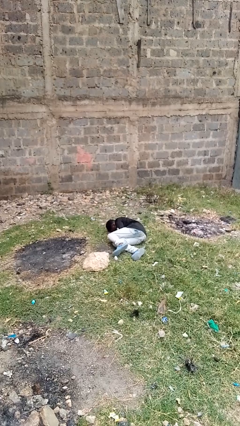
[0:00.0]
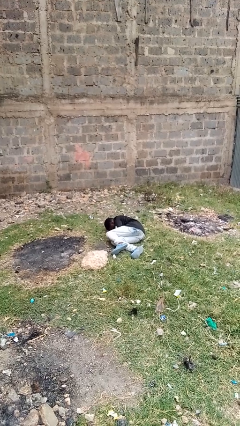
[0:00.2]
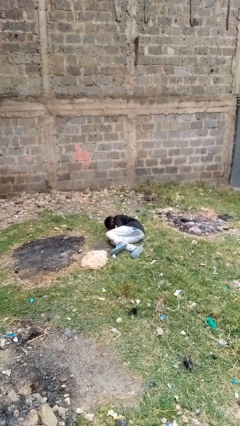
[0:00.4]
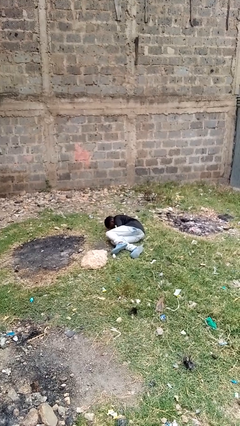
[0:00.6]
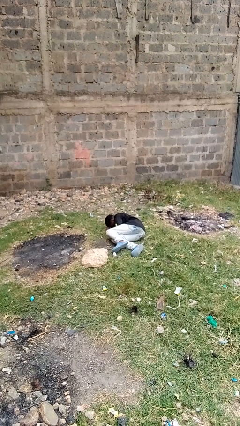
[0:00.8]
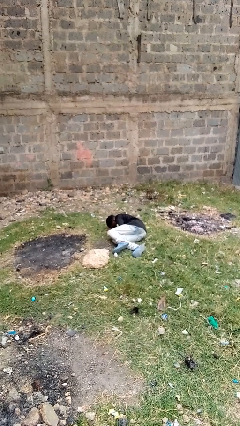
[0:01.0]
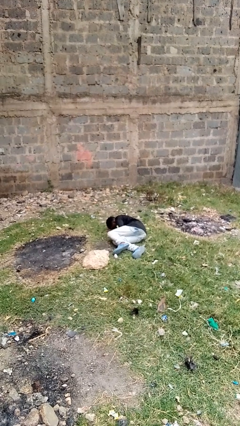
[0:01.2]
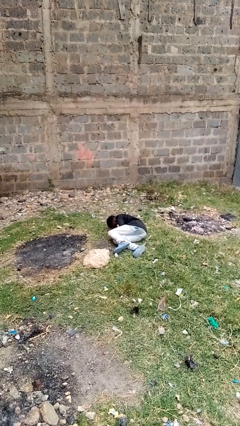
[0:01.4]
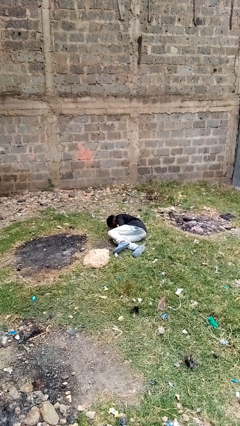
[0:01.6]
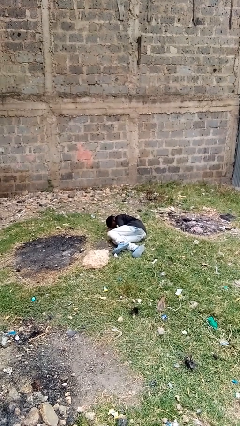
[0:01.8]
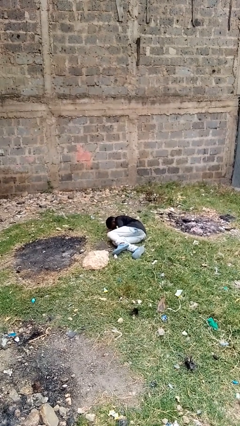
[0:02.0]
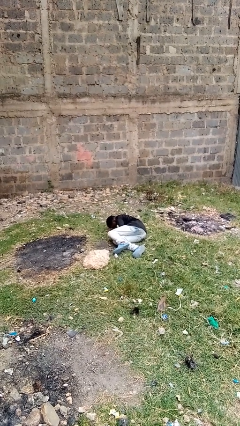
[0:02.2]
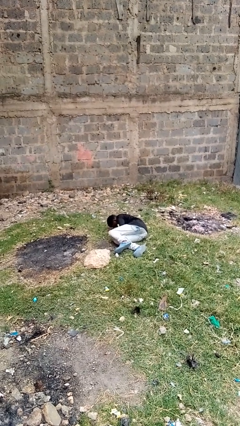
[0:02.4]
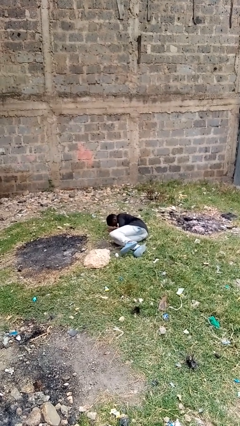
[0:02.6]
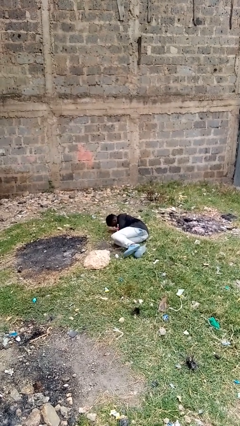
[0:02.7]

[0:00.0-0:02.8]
person lies down on floor

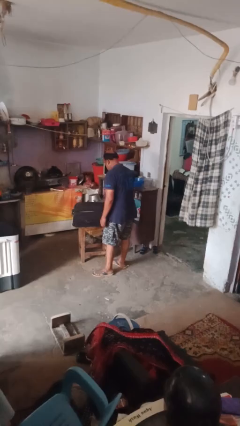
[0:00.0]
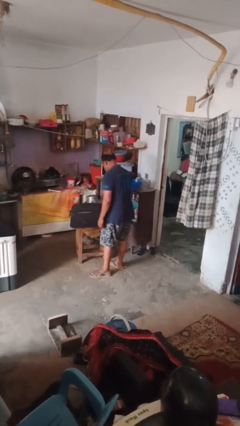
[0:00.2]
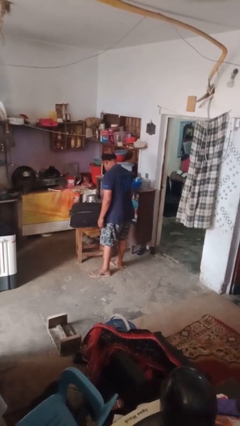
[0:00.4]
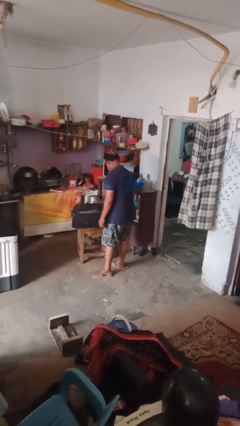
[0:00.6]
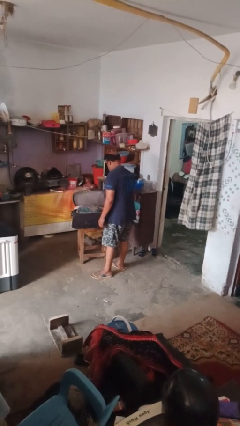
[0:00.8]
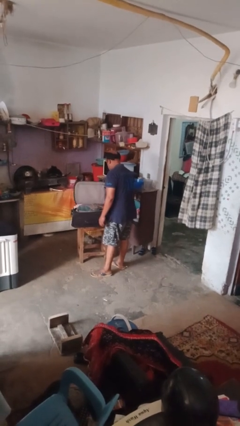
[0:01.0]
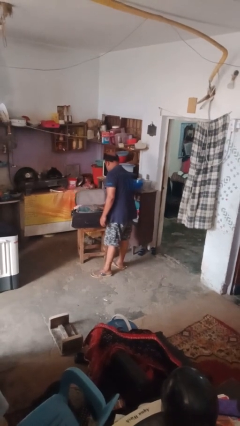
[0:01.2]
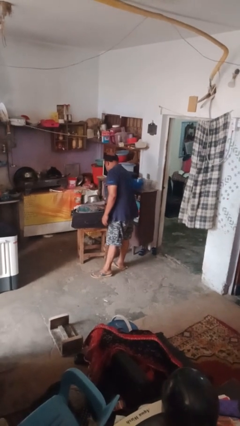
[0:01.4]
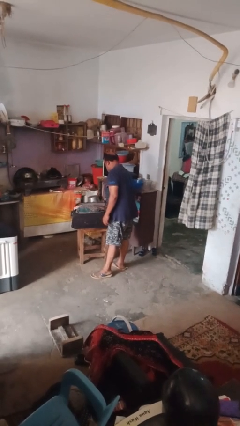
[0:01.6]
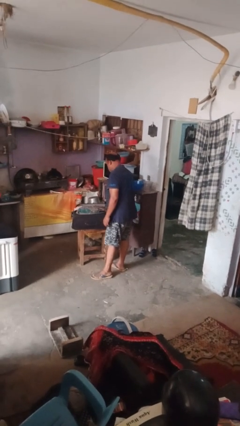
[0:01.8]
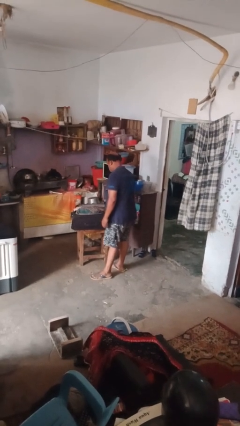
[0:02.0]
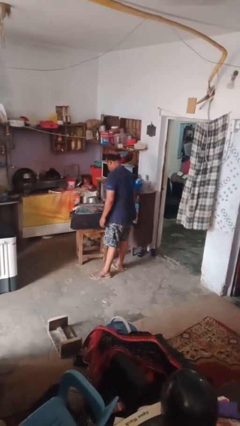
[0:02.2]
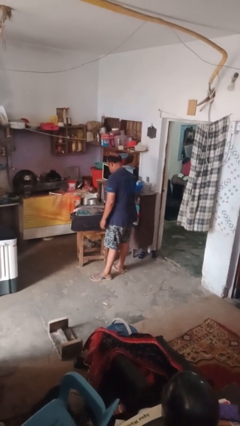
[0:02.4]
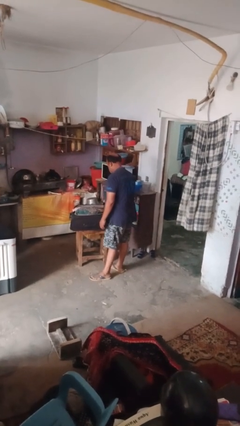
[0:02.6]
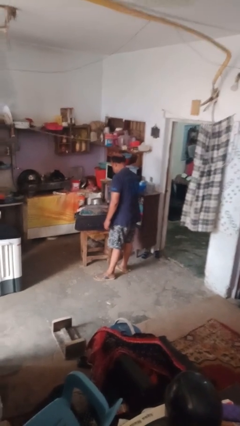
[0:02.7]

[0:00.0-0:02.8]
person opens suitcase

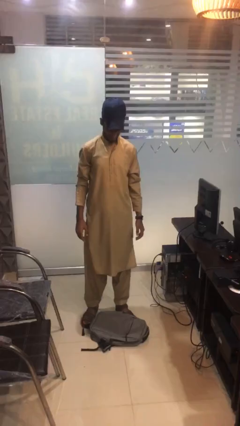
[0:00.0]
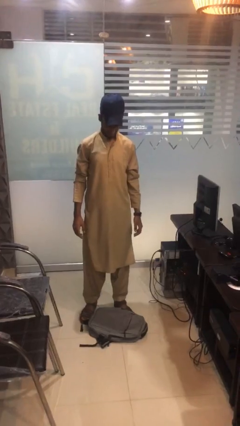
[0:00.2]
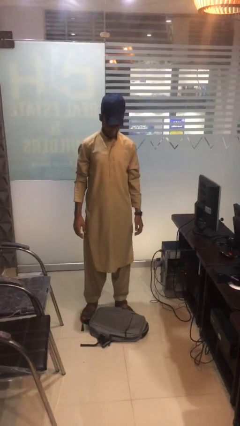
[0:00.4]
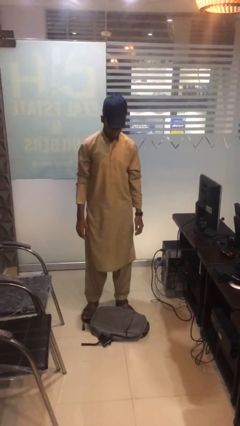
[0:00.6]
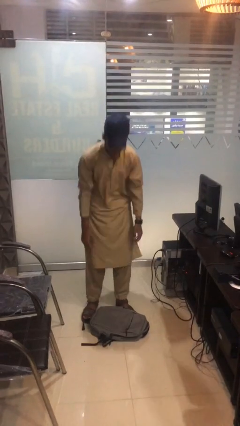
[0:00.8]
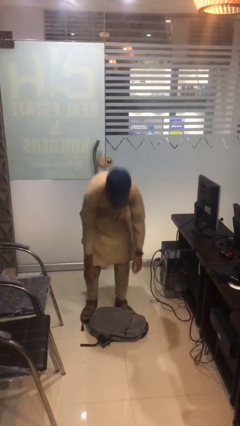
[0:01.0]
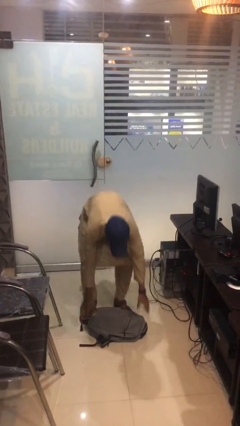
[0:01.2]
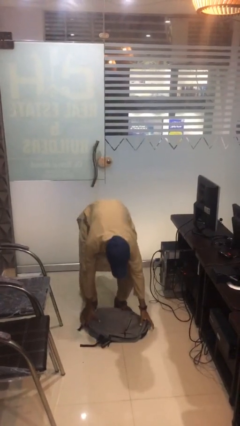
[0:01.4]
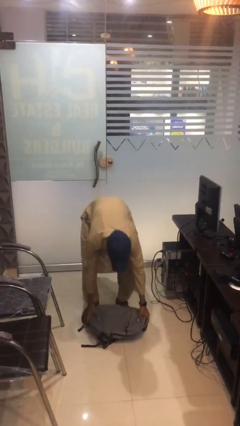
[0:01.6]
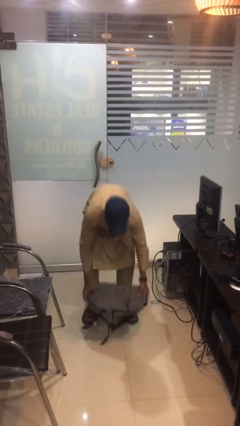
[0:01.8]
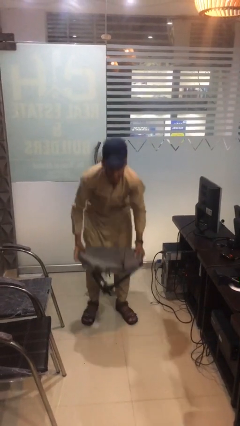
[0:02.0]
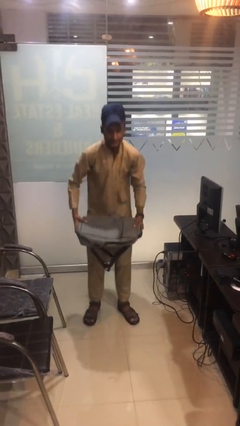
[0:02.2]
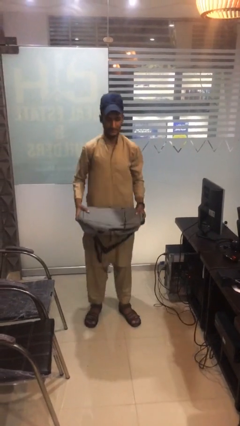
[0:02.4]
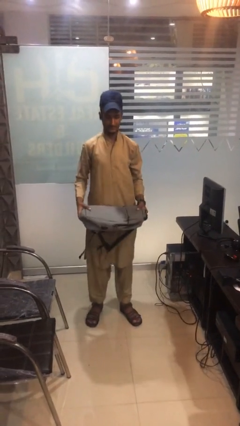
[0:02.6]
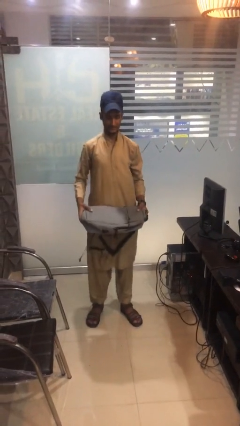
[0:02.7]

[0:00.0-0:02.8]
person picks up object from floor

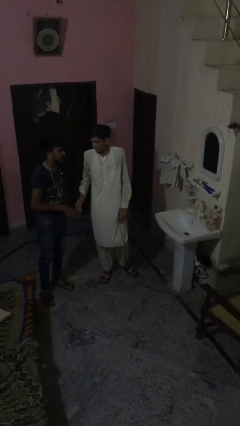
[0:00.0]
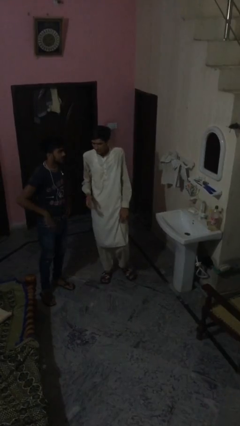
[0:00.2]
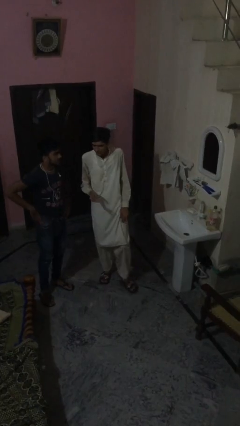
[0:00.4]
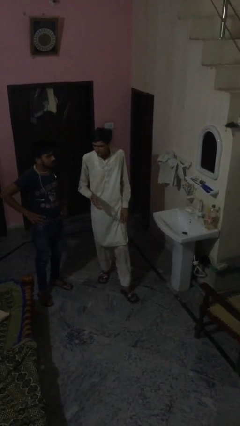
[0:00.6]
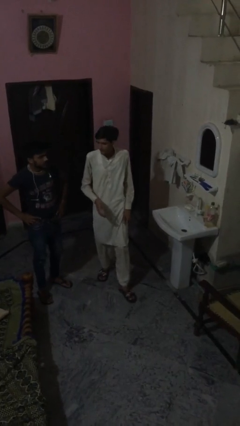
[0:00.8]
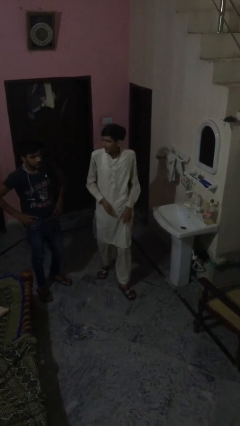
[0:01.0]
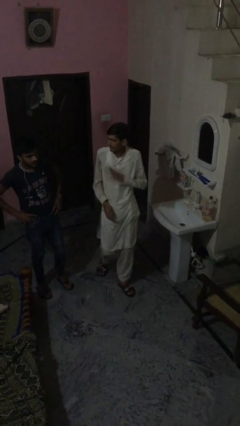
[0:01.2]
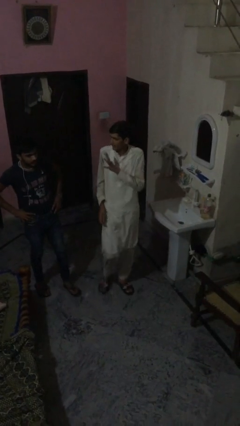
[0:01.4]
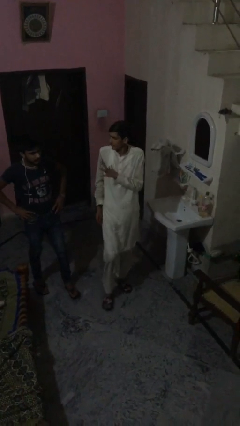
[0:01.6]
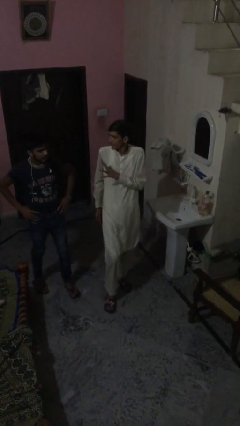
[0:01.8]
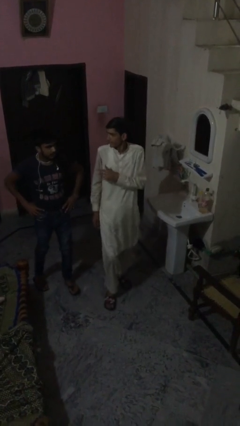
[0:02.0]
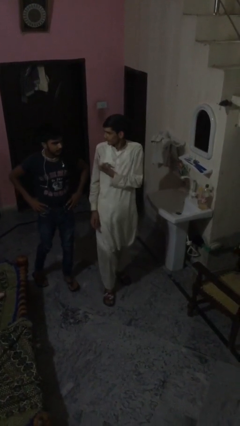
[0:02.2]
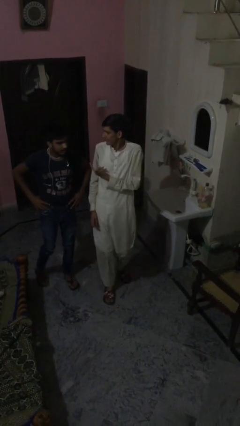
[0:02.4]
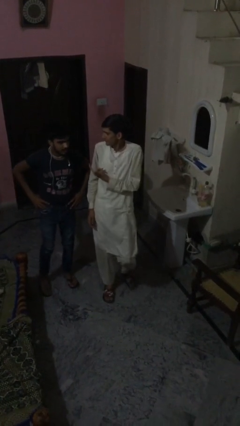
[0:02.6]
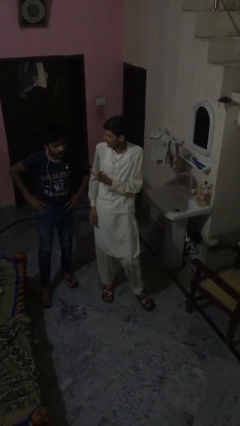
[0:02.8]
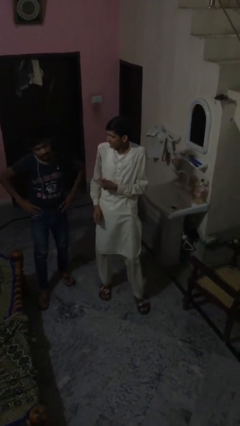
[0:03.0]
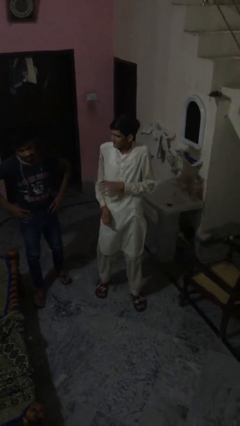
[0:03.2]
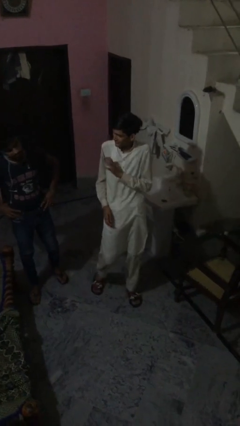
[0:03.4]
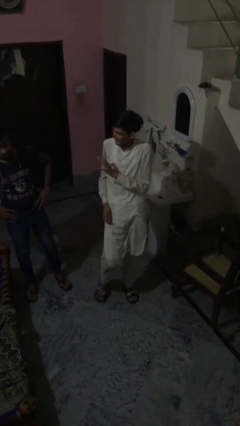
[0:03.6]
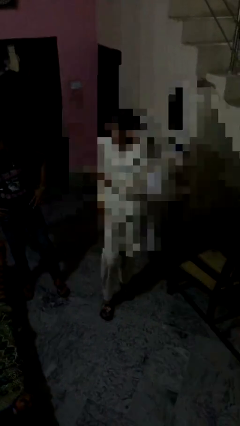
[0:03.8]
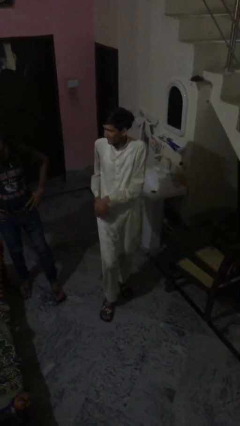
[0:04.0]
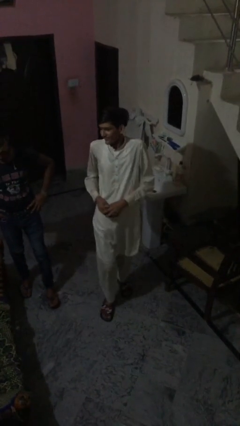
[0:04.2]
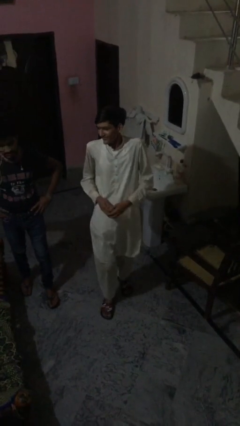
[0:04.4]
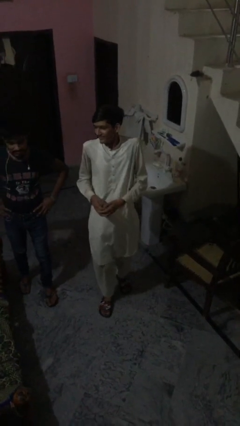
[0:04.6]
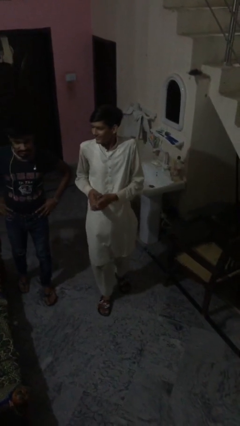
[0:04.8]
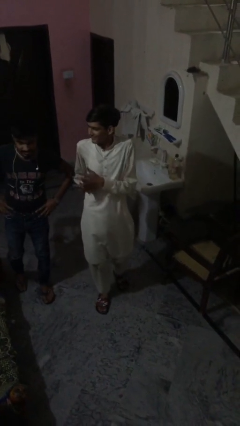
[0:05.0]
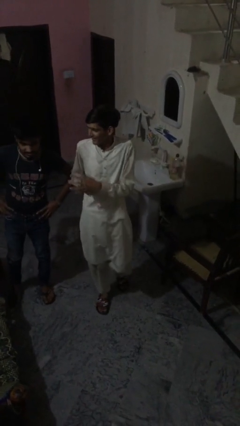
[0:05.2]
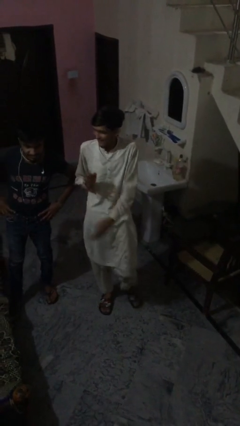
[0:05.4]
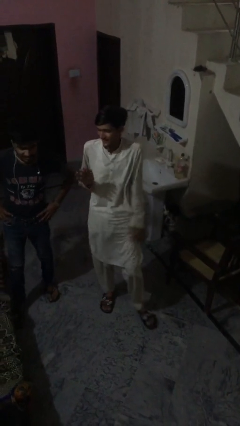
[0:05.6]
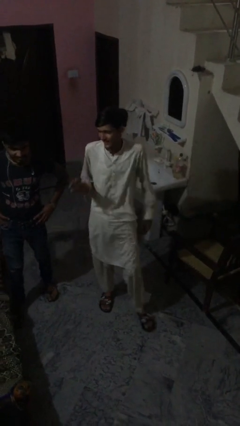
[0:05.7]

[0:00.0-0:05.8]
person talks to person

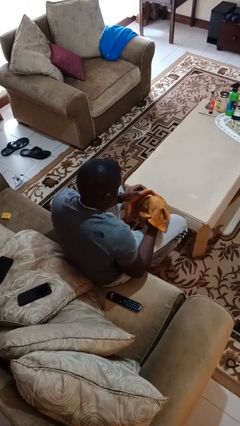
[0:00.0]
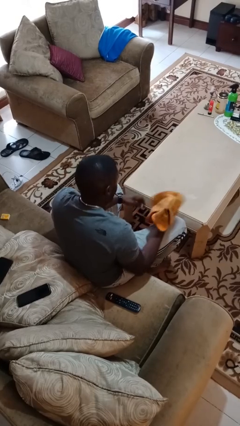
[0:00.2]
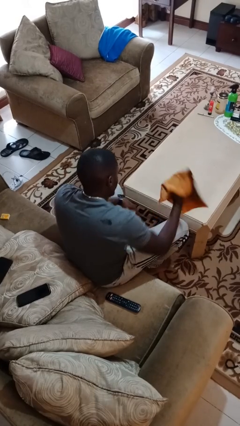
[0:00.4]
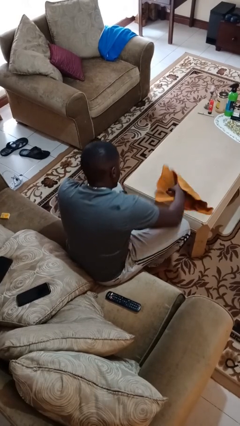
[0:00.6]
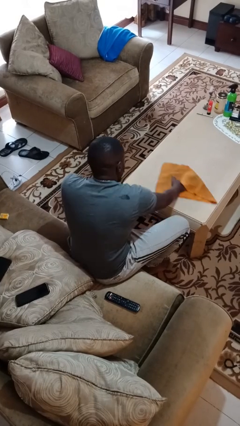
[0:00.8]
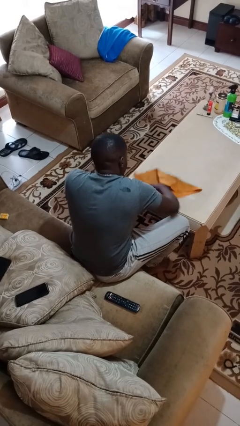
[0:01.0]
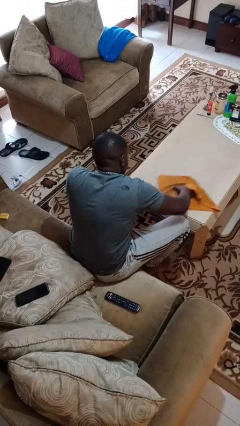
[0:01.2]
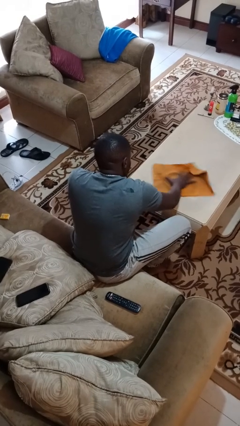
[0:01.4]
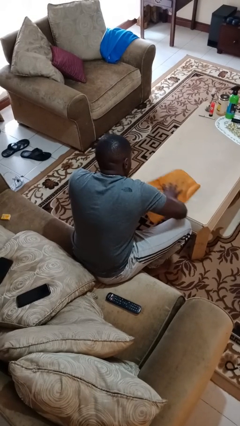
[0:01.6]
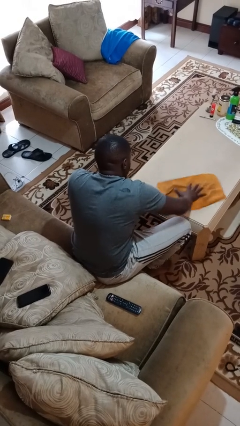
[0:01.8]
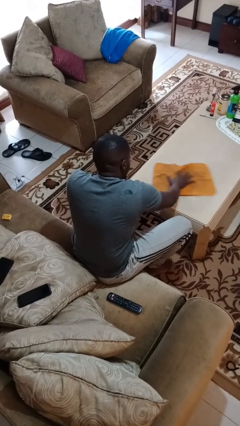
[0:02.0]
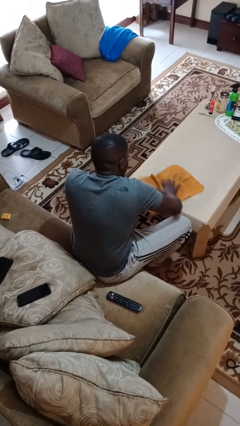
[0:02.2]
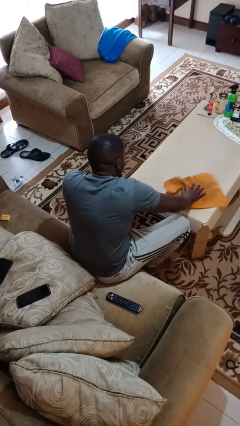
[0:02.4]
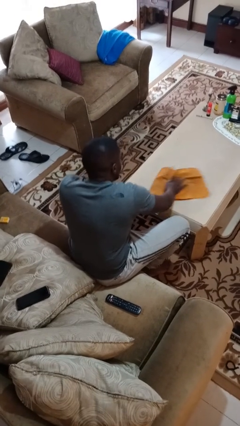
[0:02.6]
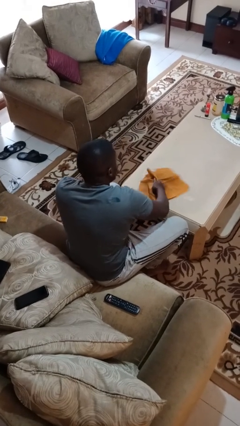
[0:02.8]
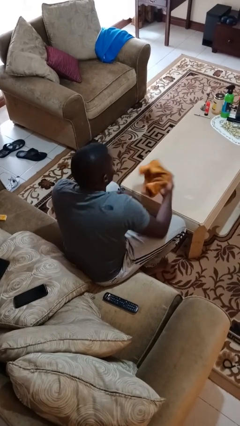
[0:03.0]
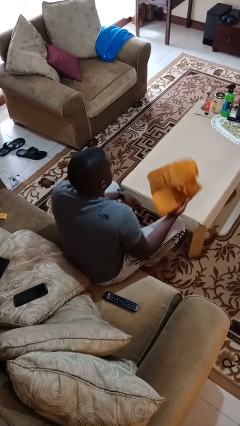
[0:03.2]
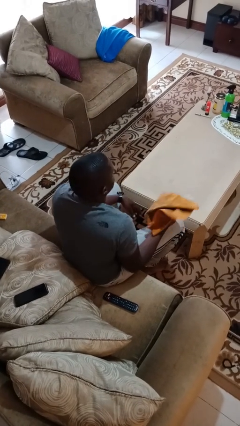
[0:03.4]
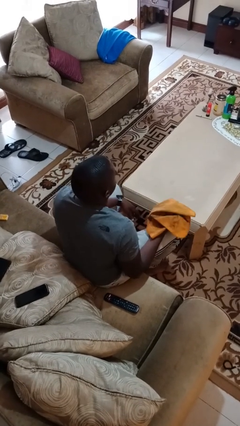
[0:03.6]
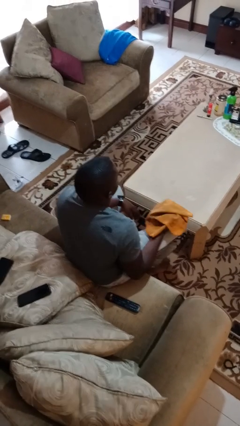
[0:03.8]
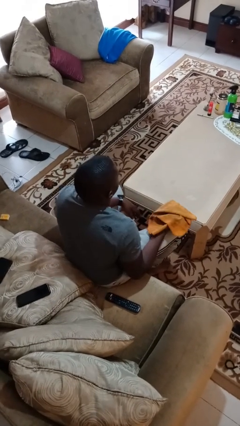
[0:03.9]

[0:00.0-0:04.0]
person cleans table with rag
